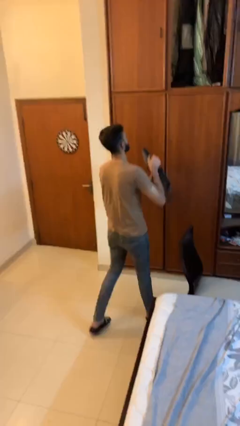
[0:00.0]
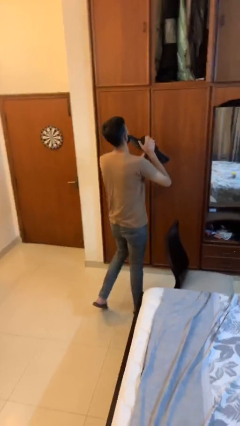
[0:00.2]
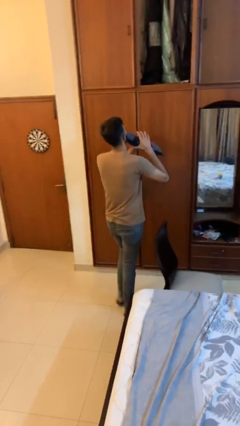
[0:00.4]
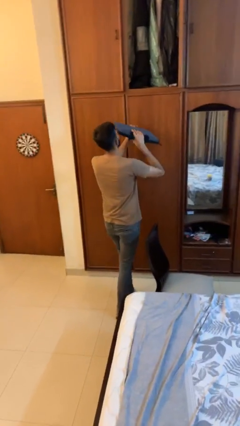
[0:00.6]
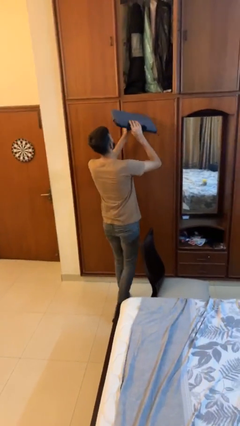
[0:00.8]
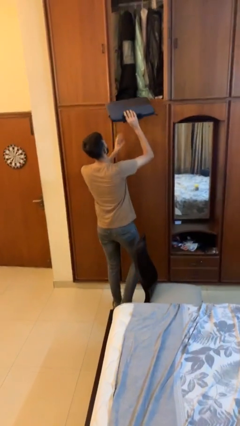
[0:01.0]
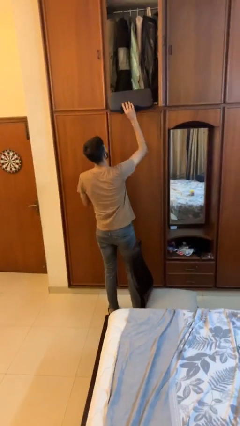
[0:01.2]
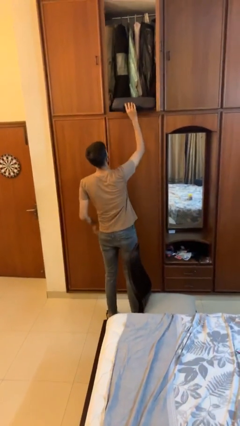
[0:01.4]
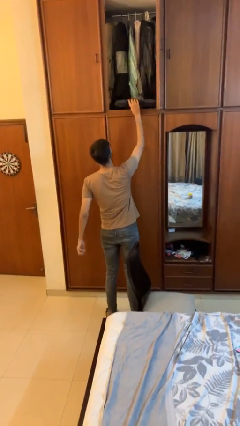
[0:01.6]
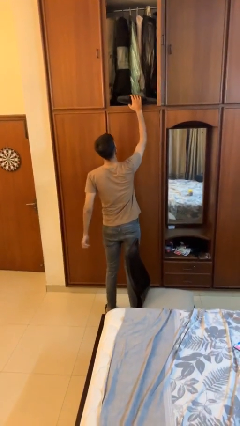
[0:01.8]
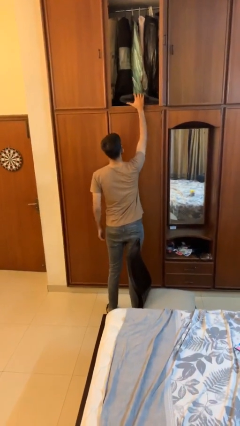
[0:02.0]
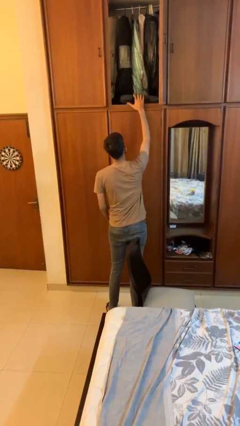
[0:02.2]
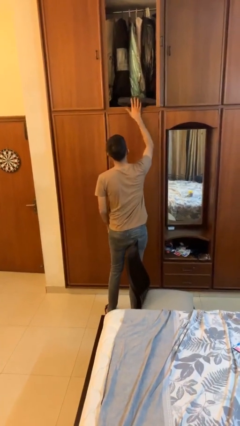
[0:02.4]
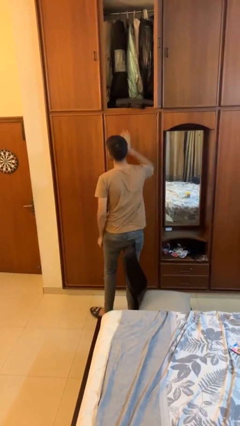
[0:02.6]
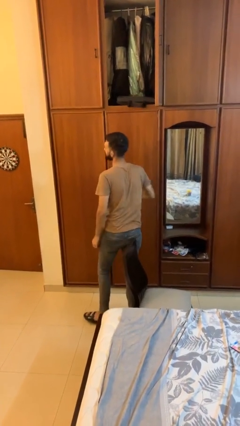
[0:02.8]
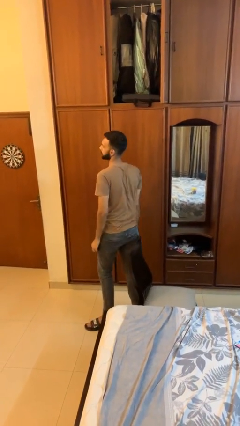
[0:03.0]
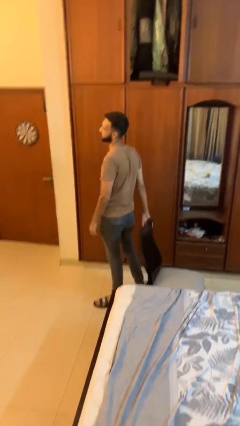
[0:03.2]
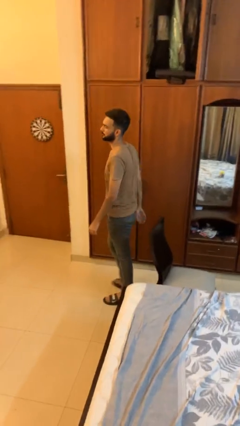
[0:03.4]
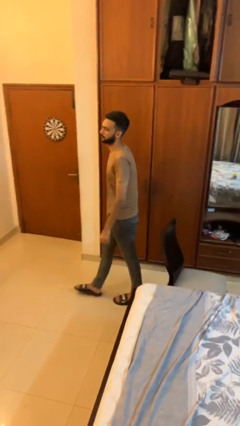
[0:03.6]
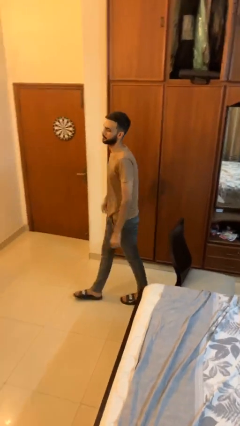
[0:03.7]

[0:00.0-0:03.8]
person puts down object on shelf

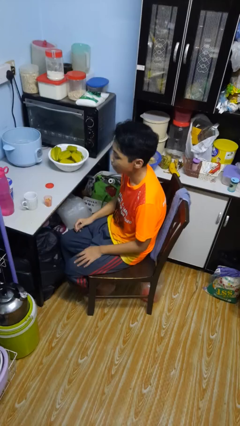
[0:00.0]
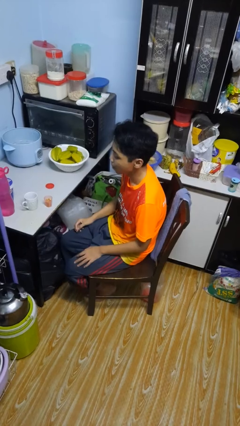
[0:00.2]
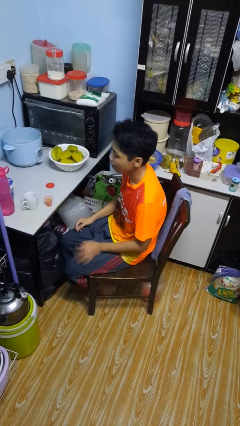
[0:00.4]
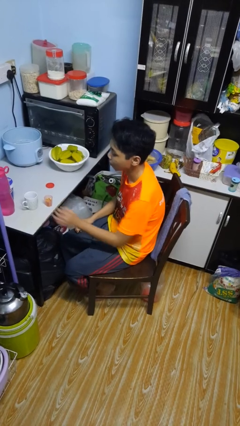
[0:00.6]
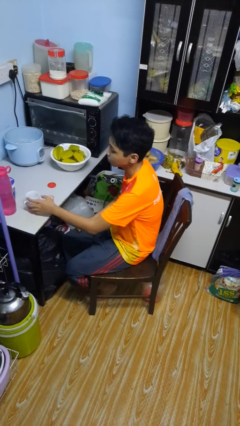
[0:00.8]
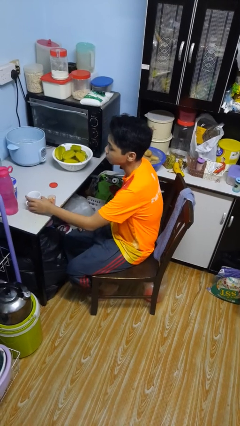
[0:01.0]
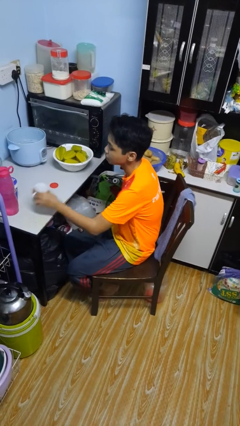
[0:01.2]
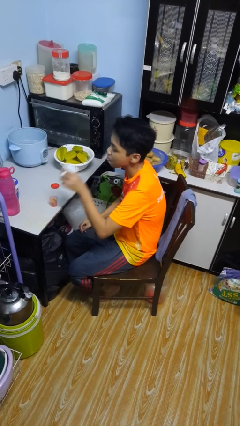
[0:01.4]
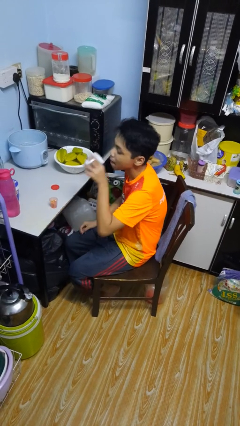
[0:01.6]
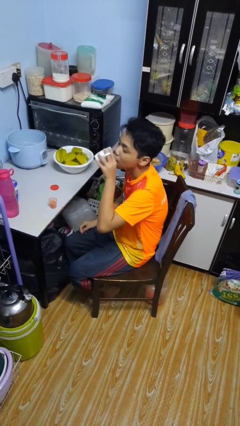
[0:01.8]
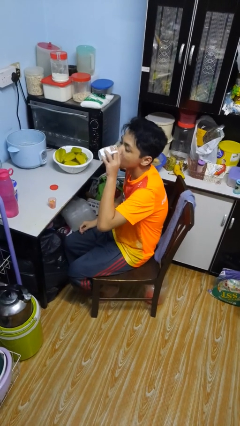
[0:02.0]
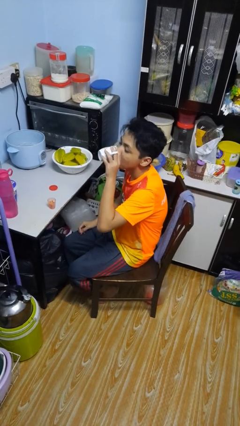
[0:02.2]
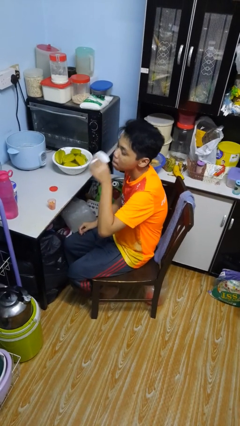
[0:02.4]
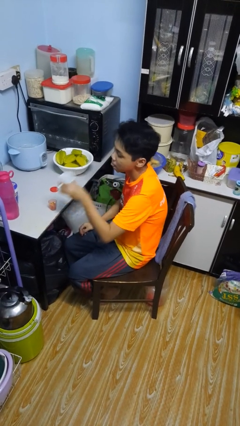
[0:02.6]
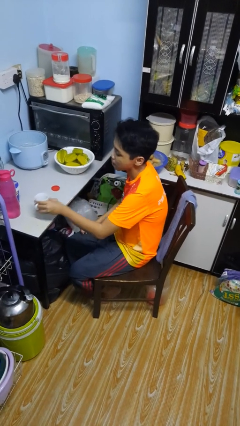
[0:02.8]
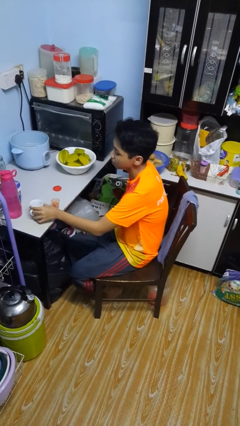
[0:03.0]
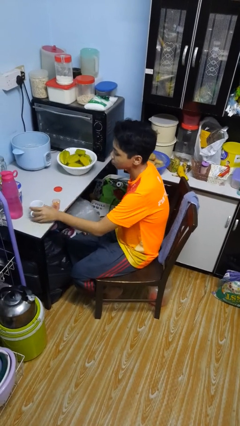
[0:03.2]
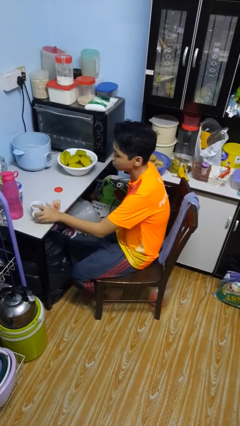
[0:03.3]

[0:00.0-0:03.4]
person drinks from cup

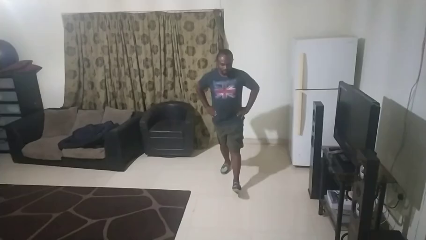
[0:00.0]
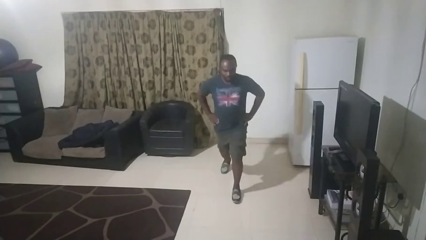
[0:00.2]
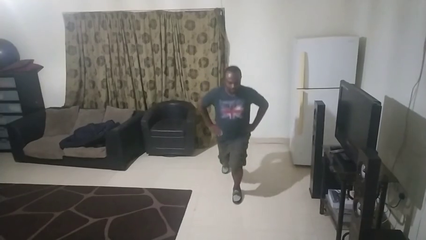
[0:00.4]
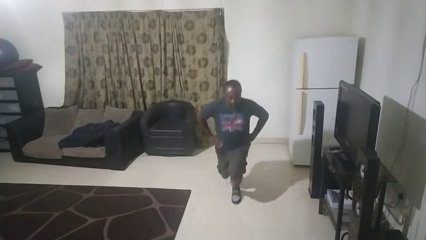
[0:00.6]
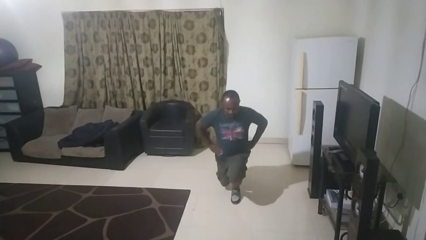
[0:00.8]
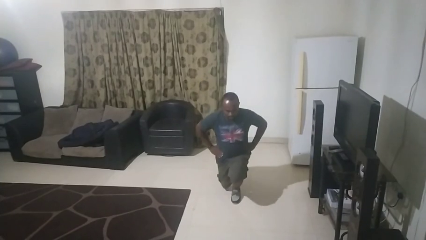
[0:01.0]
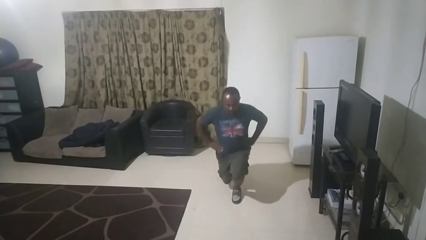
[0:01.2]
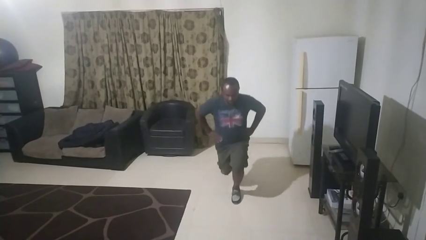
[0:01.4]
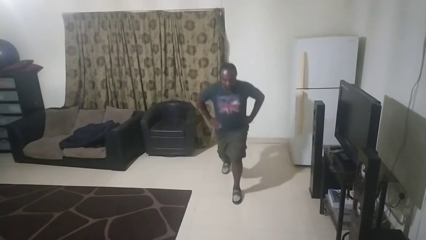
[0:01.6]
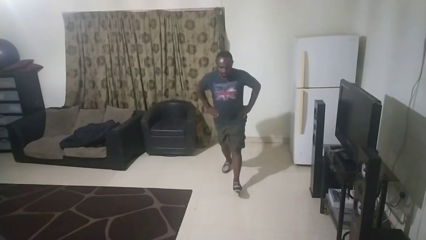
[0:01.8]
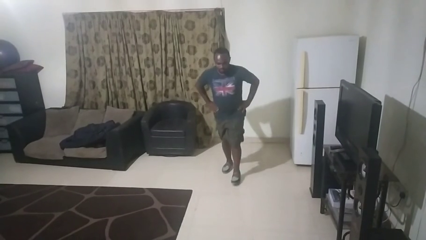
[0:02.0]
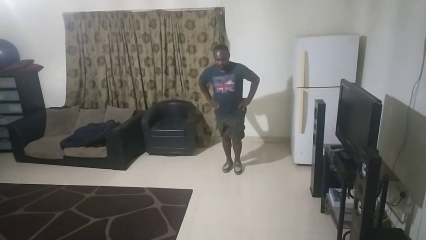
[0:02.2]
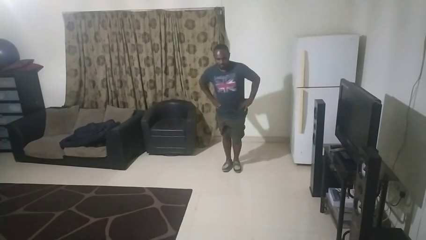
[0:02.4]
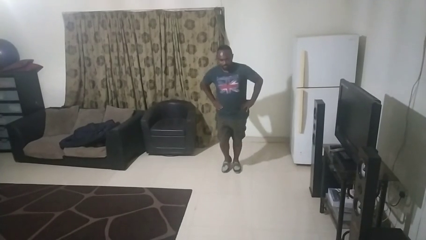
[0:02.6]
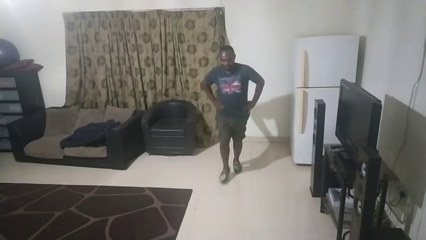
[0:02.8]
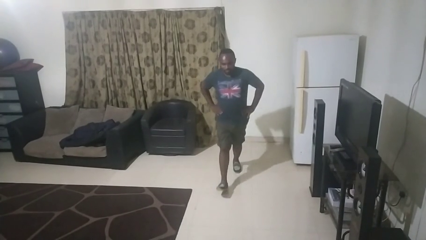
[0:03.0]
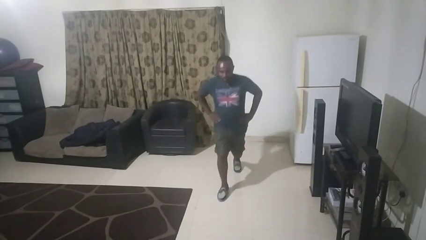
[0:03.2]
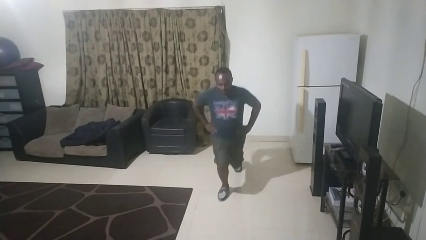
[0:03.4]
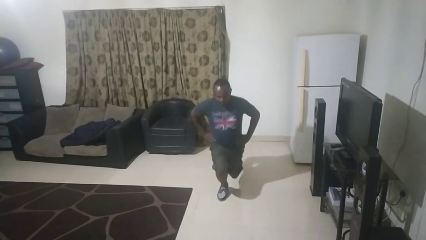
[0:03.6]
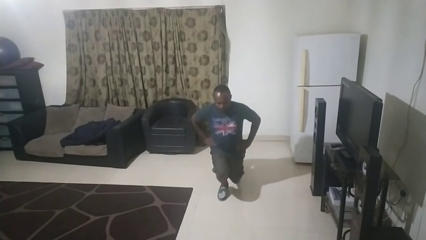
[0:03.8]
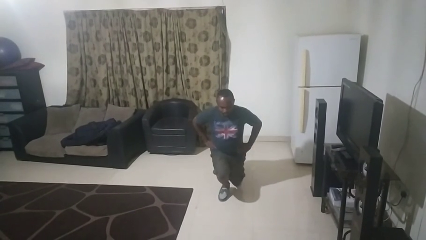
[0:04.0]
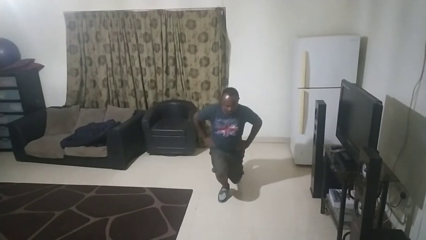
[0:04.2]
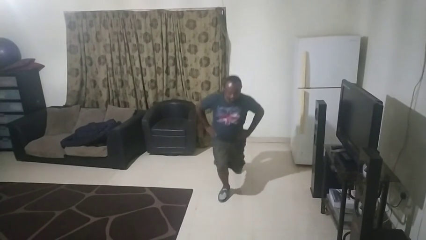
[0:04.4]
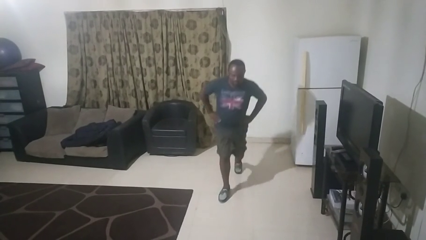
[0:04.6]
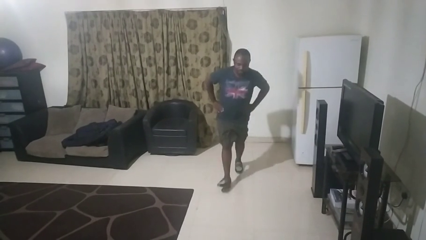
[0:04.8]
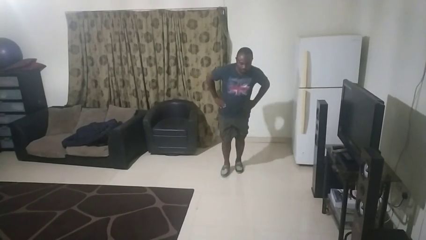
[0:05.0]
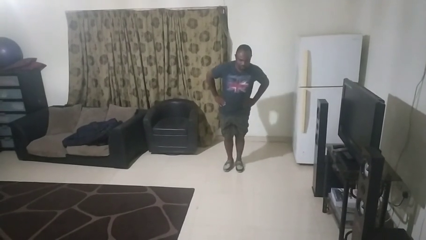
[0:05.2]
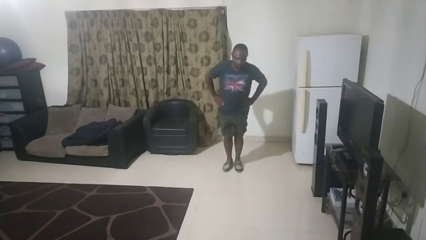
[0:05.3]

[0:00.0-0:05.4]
person exercises with lunges

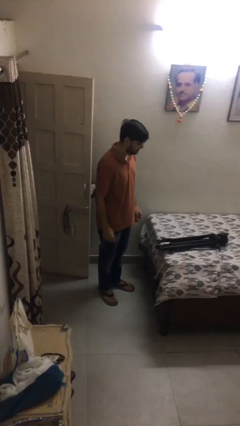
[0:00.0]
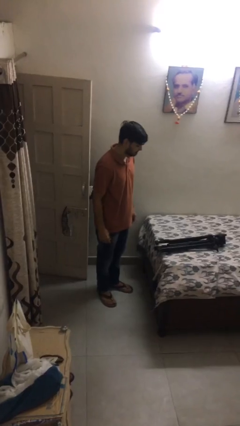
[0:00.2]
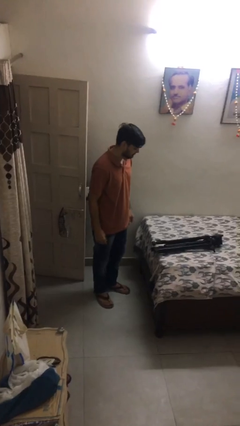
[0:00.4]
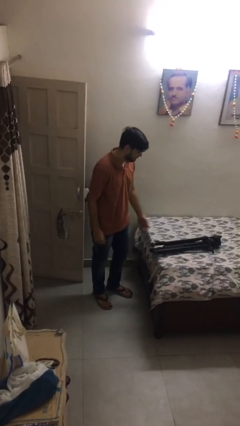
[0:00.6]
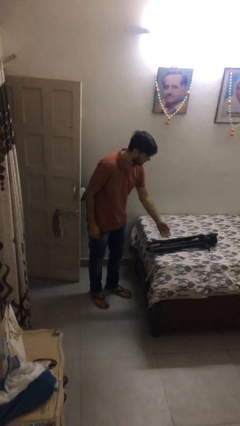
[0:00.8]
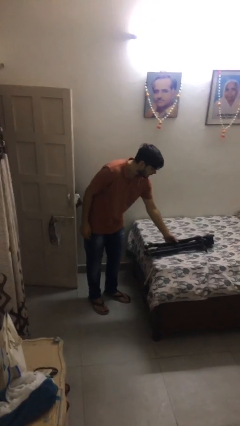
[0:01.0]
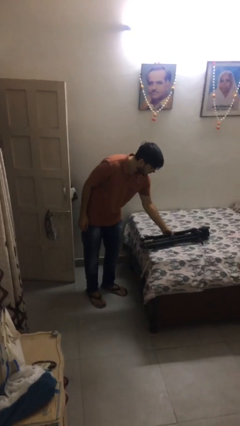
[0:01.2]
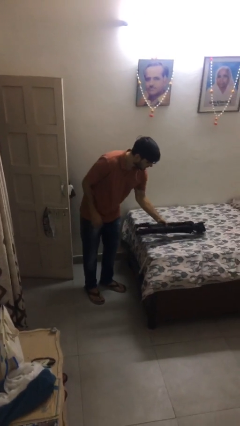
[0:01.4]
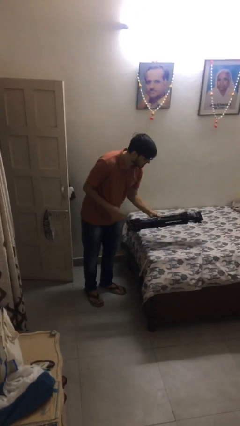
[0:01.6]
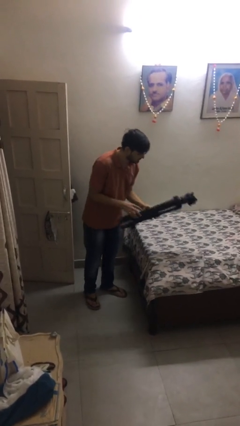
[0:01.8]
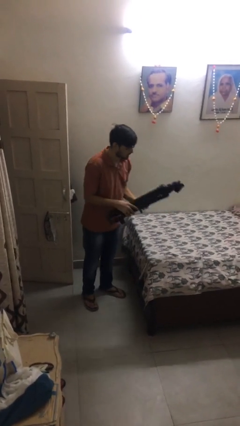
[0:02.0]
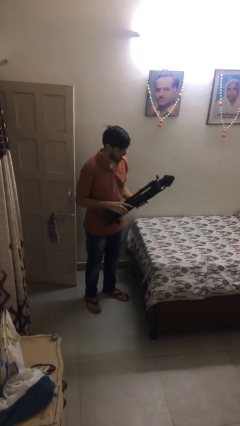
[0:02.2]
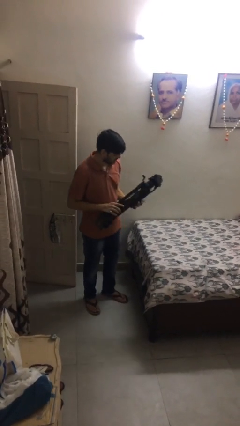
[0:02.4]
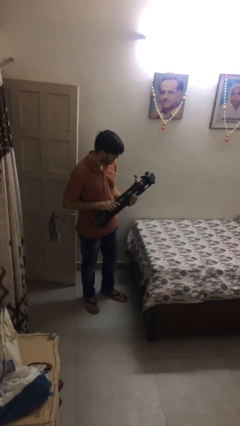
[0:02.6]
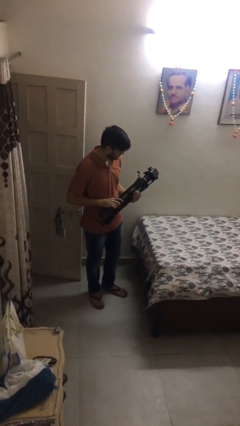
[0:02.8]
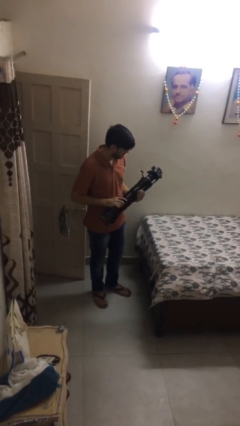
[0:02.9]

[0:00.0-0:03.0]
person picks up object from bed

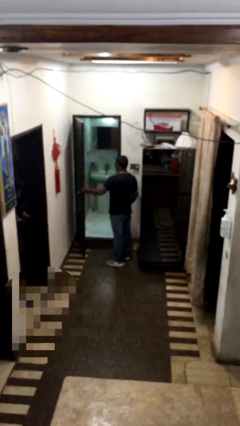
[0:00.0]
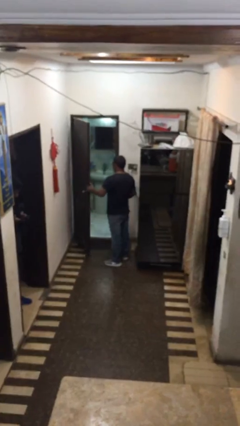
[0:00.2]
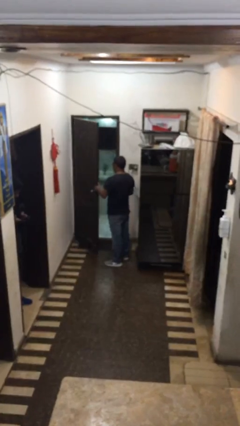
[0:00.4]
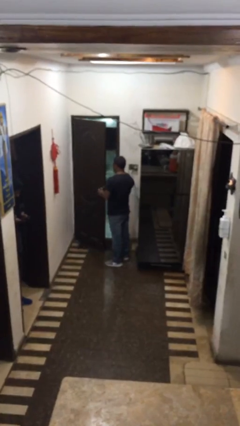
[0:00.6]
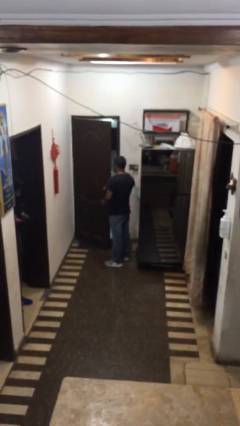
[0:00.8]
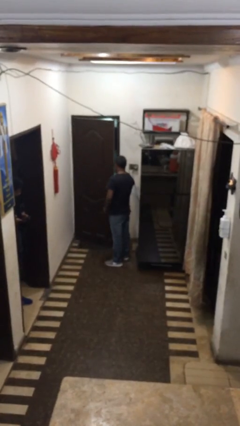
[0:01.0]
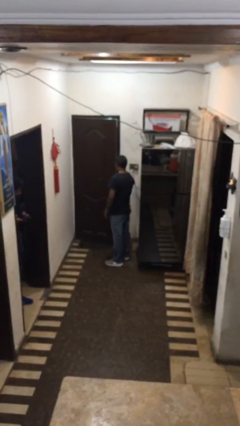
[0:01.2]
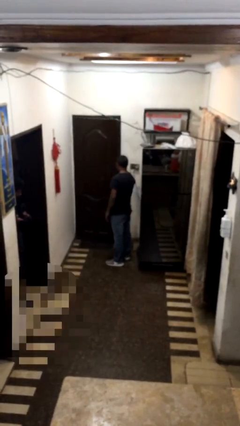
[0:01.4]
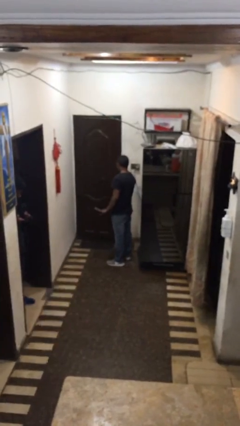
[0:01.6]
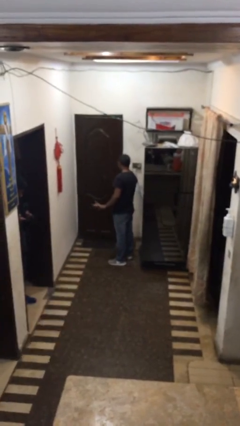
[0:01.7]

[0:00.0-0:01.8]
person closes facility door
